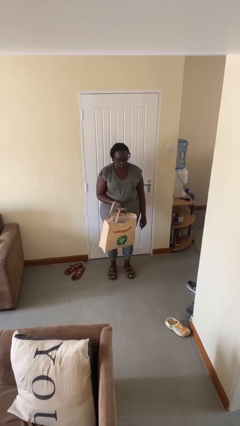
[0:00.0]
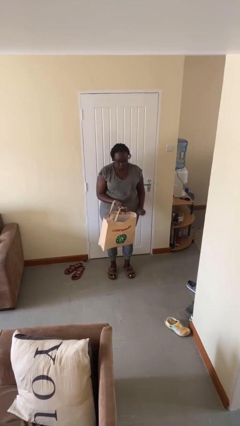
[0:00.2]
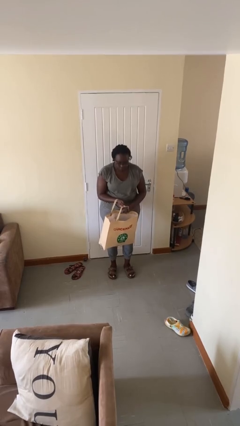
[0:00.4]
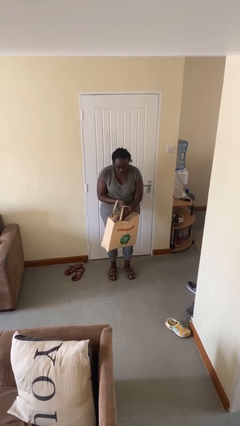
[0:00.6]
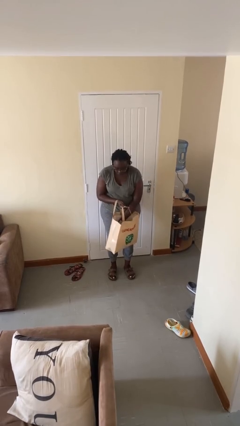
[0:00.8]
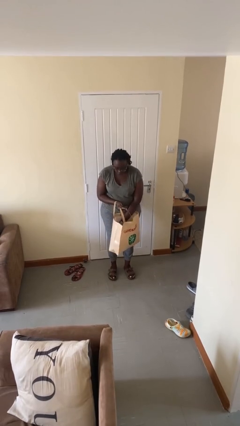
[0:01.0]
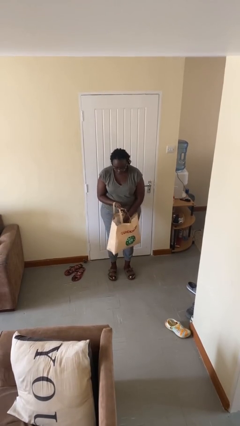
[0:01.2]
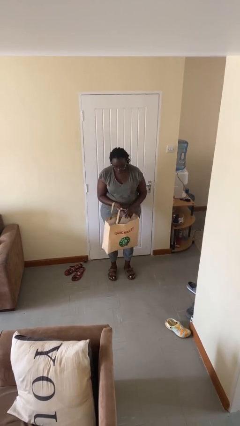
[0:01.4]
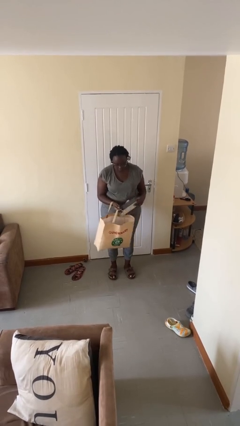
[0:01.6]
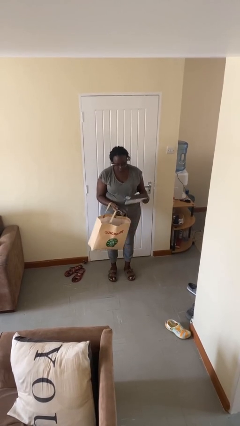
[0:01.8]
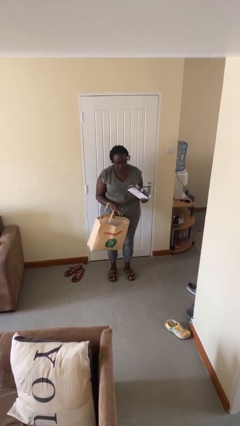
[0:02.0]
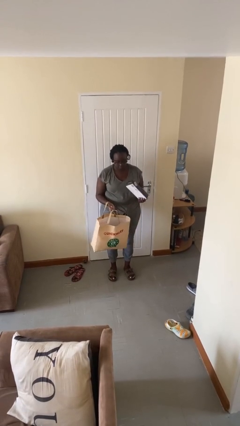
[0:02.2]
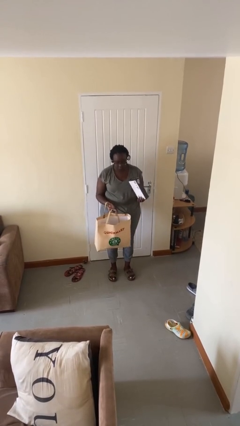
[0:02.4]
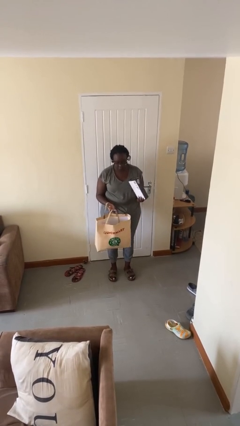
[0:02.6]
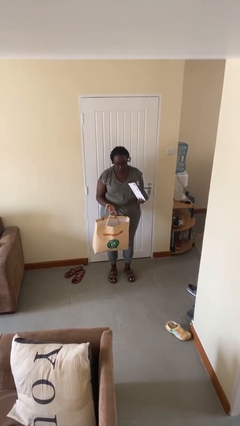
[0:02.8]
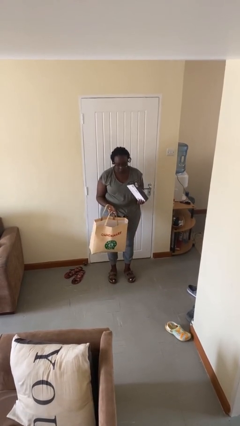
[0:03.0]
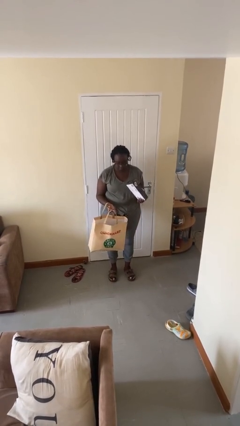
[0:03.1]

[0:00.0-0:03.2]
person takes object from bag

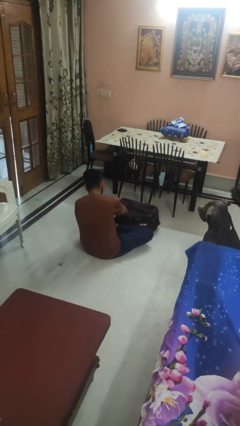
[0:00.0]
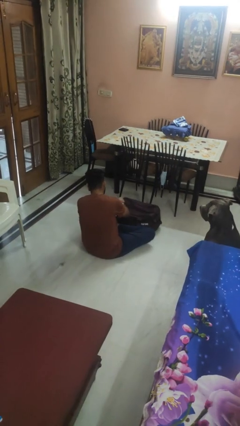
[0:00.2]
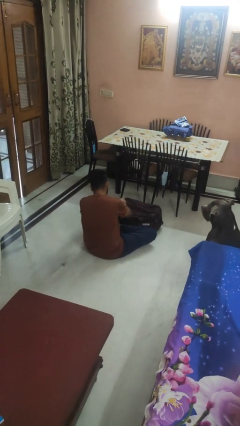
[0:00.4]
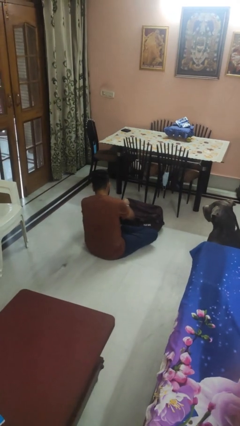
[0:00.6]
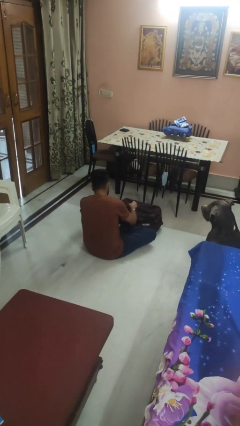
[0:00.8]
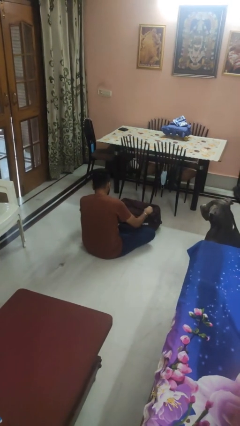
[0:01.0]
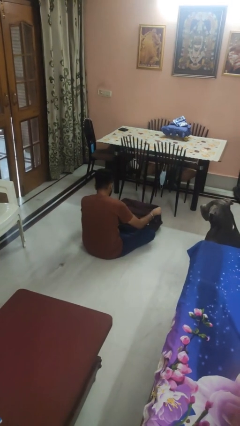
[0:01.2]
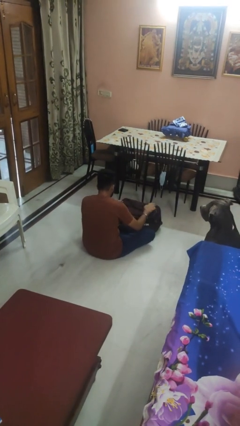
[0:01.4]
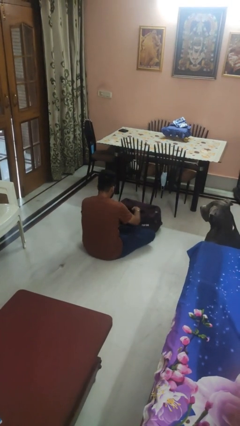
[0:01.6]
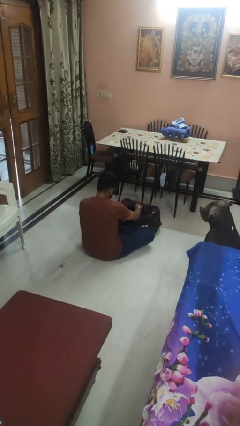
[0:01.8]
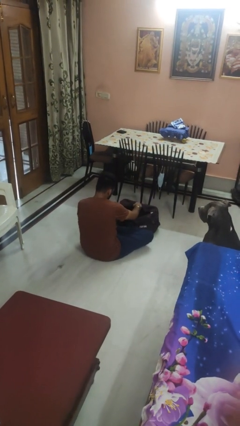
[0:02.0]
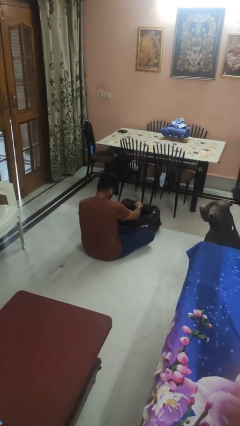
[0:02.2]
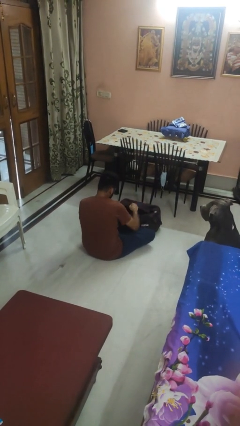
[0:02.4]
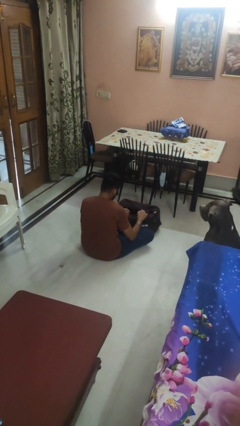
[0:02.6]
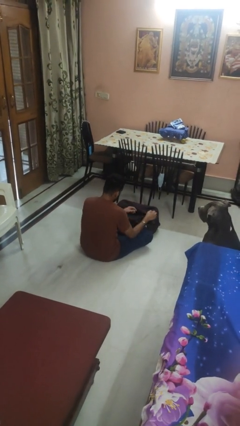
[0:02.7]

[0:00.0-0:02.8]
person opens suitcase

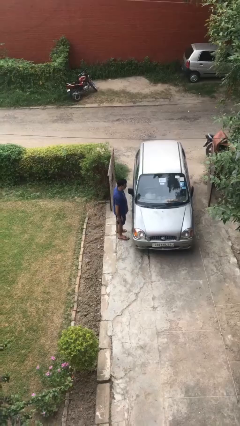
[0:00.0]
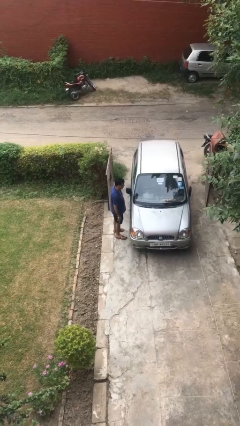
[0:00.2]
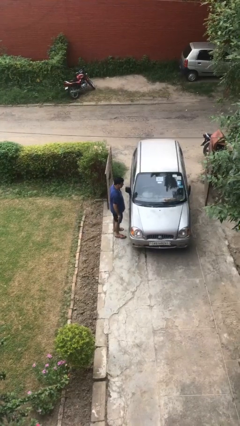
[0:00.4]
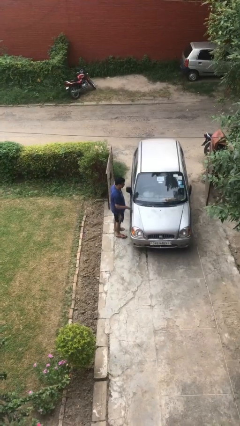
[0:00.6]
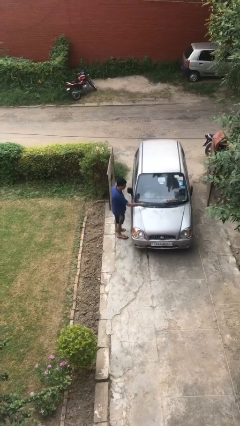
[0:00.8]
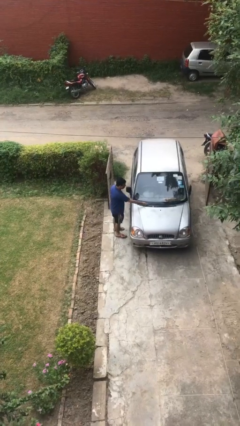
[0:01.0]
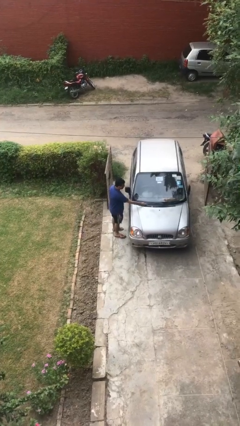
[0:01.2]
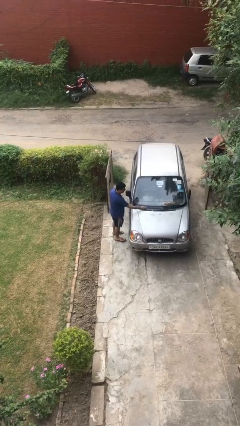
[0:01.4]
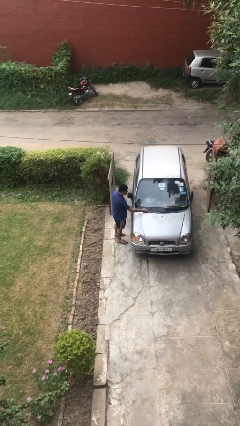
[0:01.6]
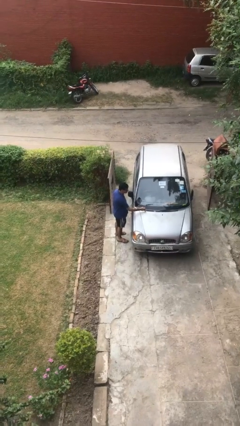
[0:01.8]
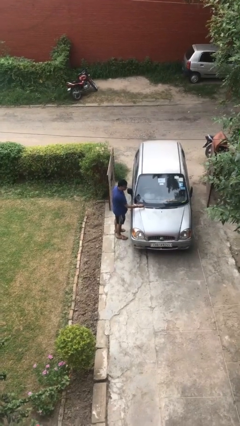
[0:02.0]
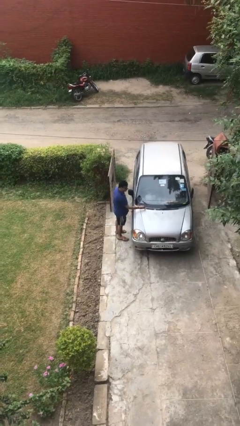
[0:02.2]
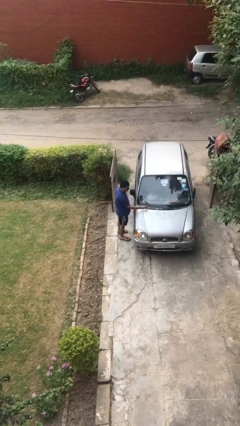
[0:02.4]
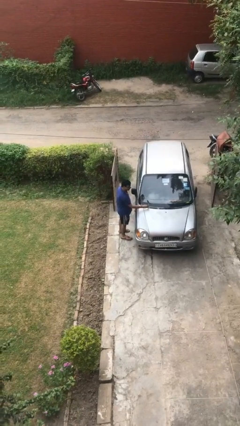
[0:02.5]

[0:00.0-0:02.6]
person flips up car wipers

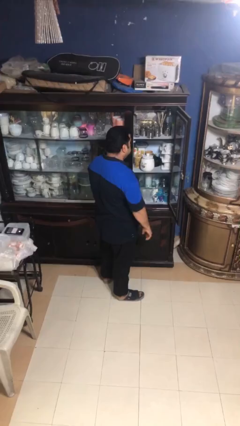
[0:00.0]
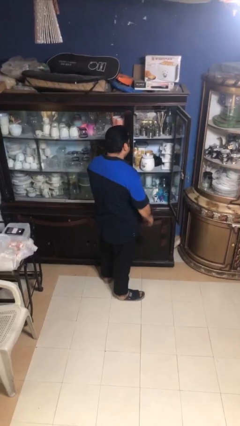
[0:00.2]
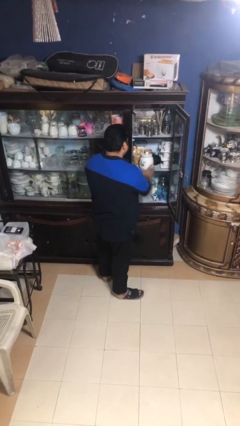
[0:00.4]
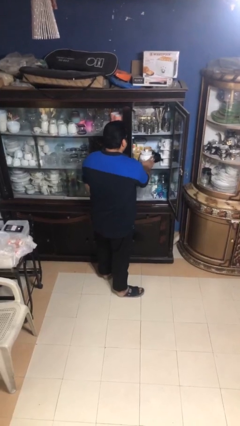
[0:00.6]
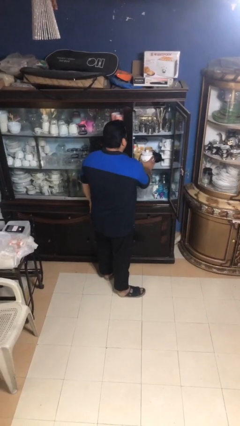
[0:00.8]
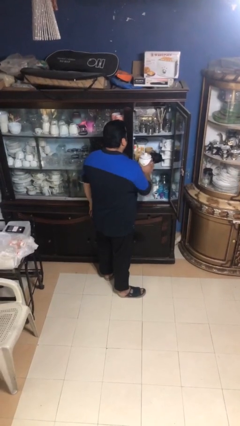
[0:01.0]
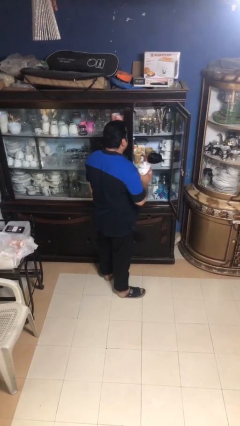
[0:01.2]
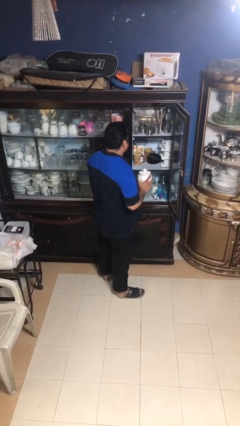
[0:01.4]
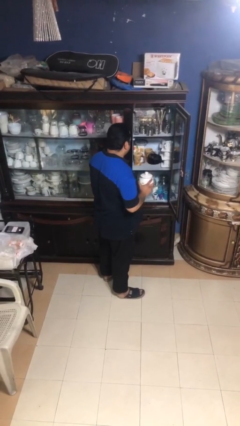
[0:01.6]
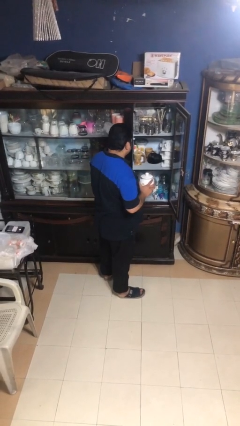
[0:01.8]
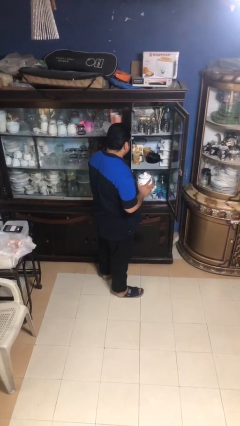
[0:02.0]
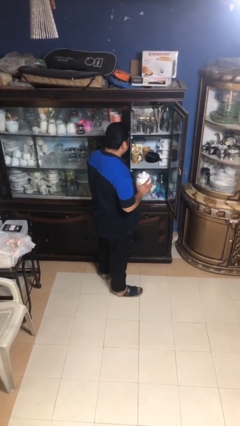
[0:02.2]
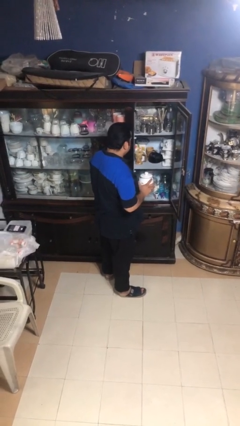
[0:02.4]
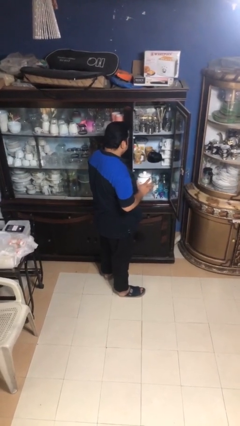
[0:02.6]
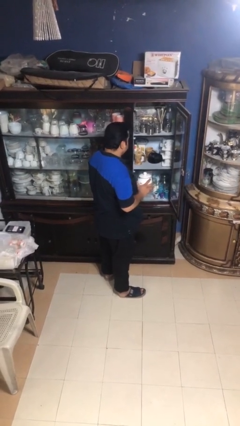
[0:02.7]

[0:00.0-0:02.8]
person picks up object from cabinet

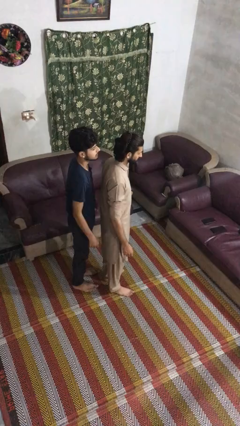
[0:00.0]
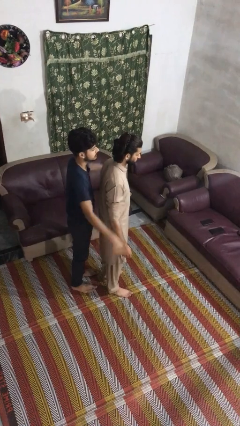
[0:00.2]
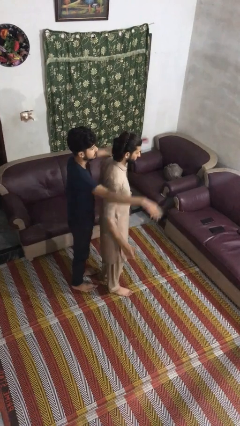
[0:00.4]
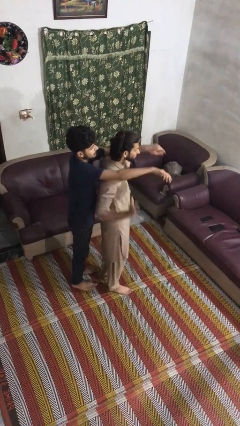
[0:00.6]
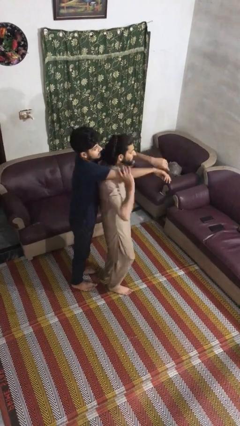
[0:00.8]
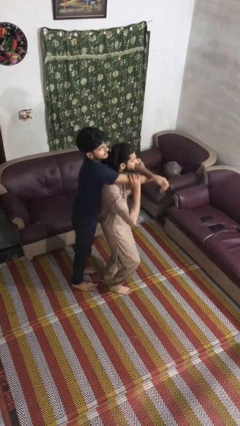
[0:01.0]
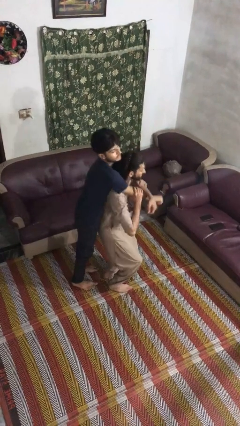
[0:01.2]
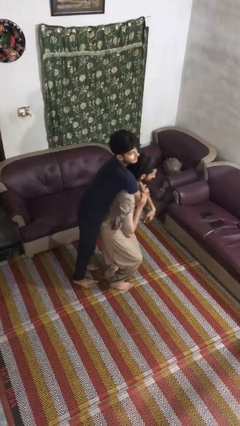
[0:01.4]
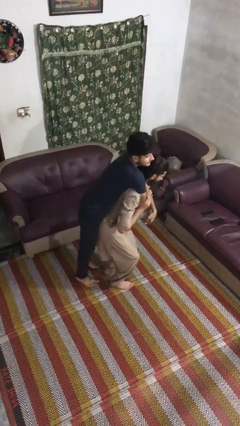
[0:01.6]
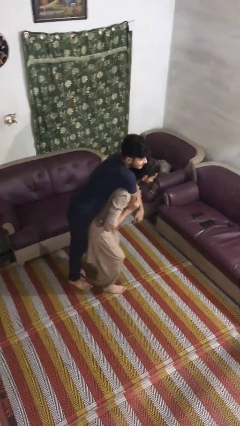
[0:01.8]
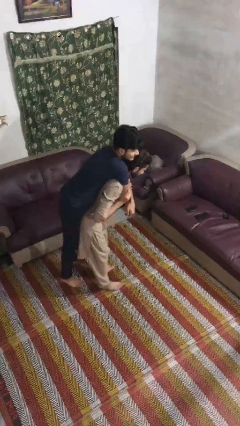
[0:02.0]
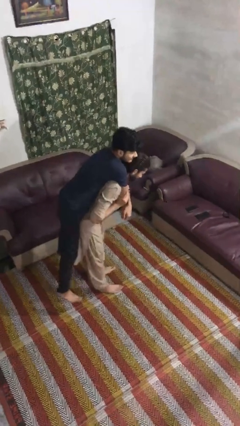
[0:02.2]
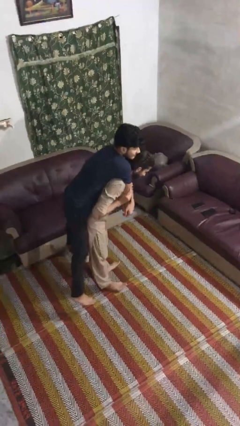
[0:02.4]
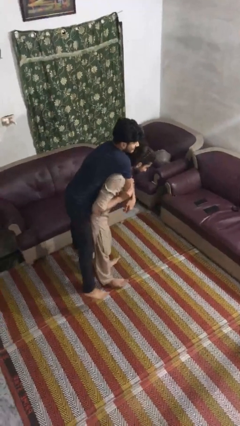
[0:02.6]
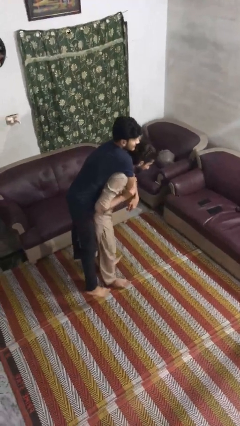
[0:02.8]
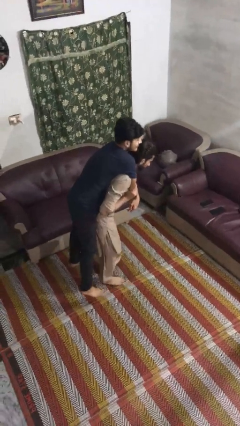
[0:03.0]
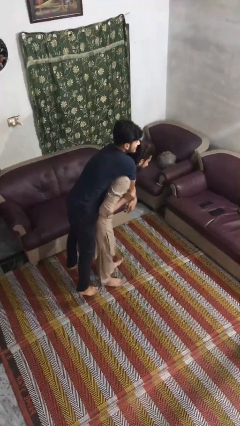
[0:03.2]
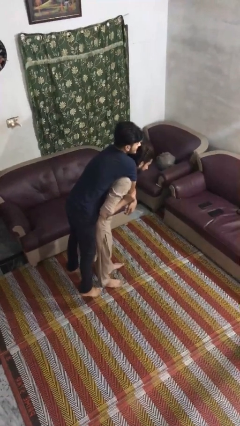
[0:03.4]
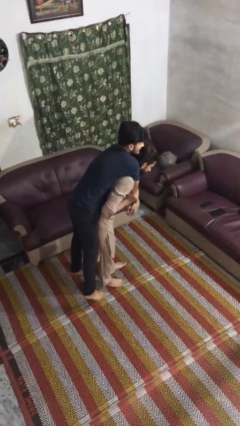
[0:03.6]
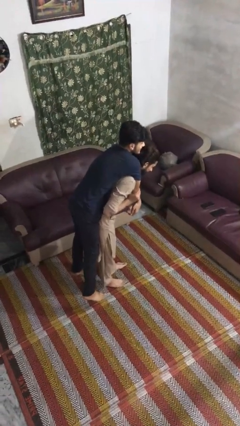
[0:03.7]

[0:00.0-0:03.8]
person carries person over shoulder

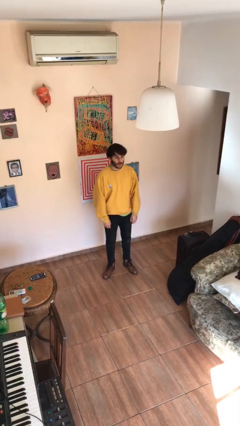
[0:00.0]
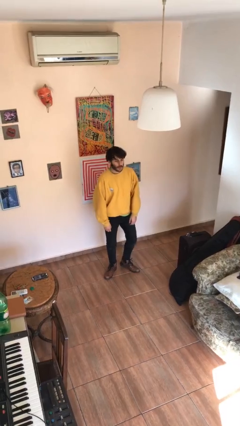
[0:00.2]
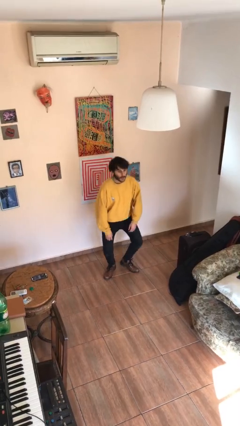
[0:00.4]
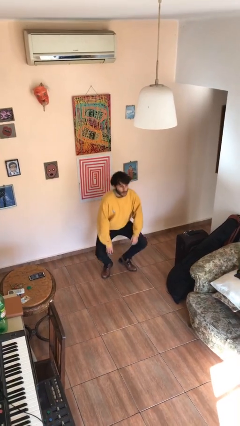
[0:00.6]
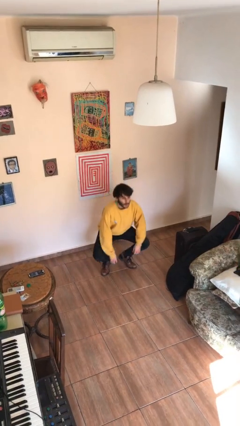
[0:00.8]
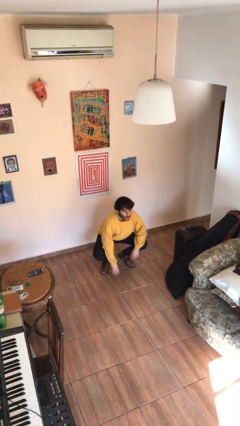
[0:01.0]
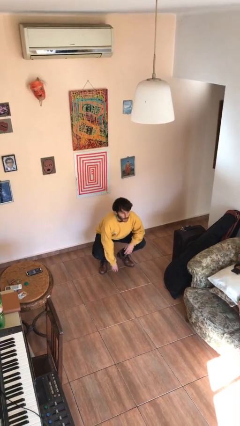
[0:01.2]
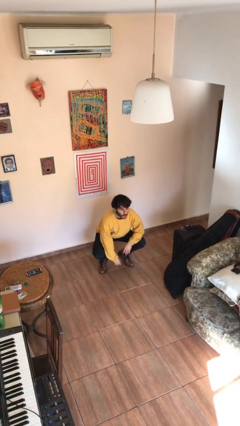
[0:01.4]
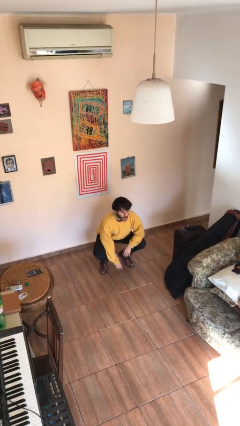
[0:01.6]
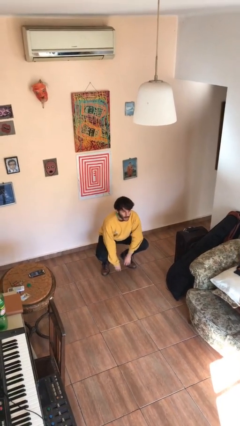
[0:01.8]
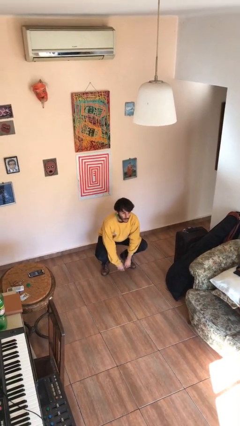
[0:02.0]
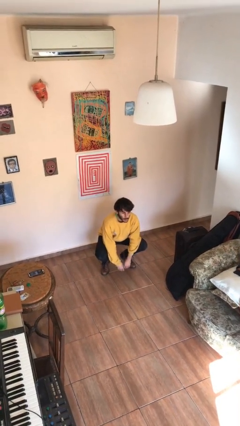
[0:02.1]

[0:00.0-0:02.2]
person squats
